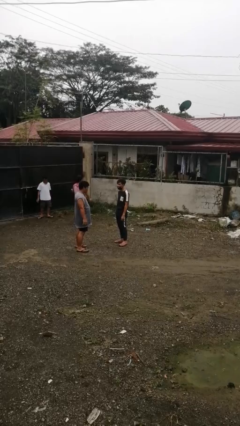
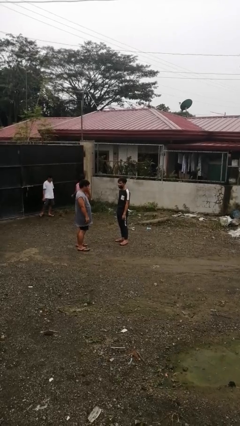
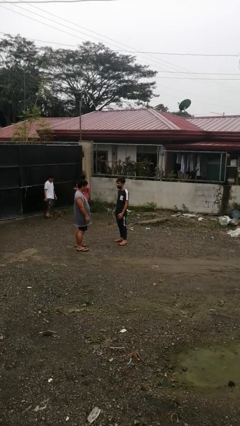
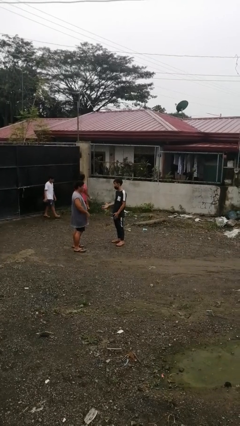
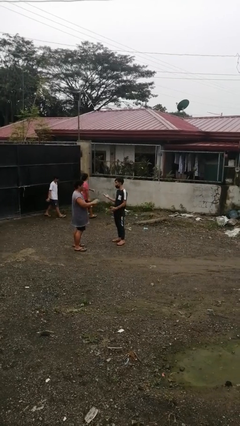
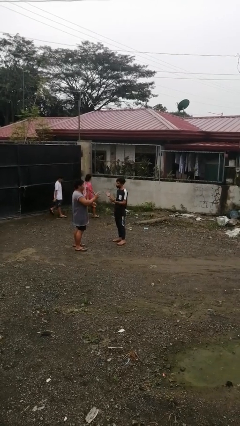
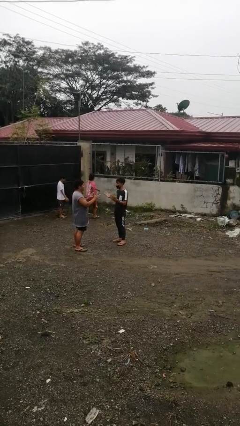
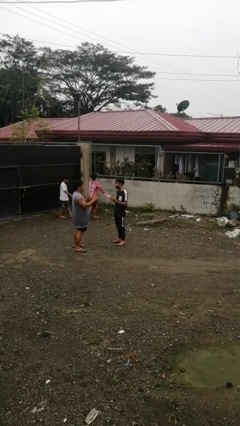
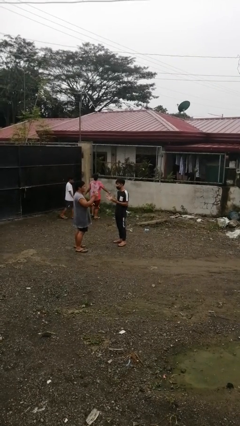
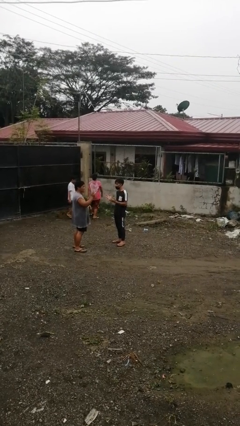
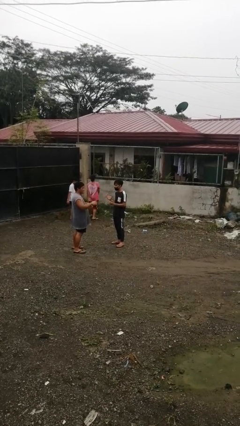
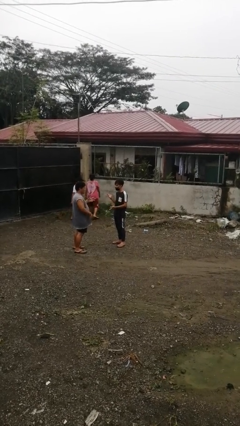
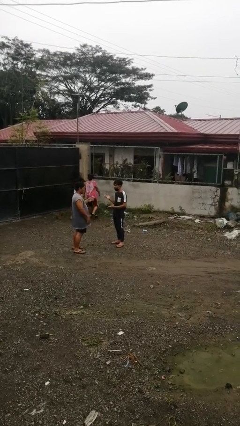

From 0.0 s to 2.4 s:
person talks to person

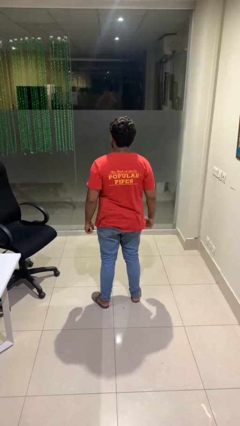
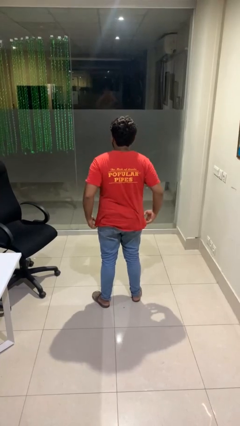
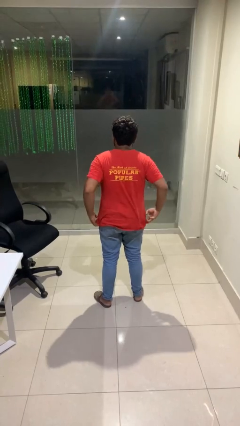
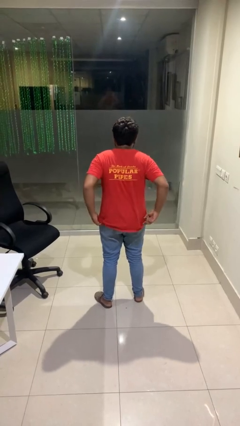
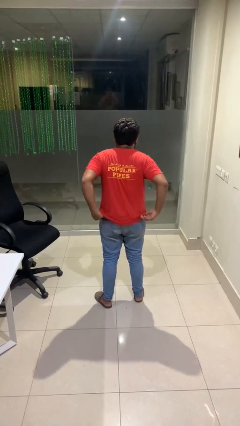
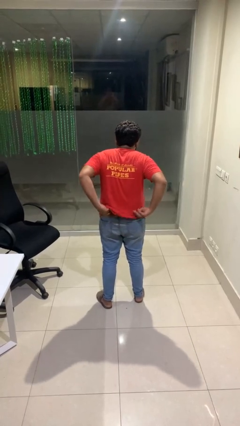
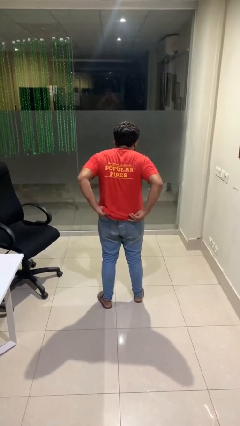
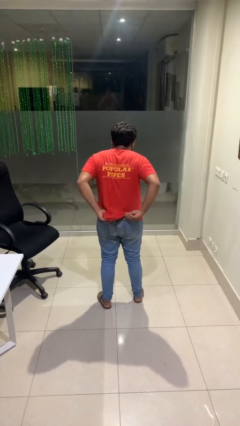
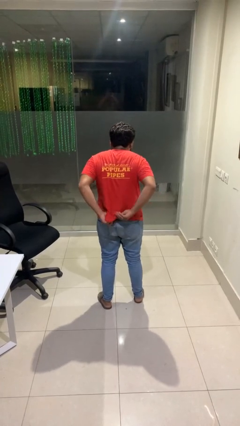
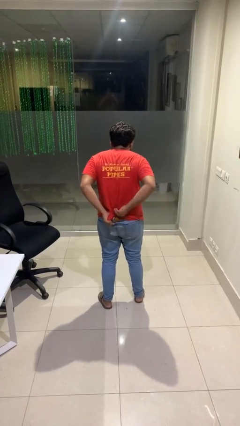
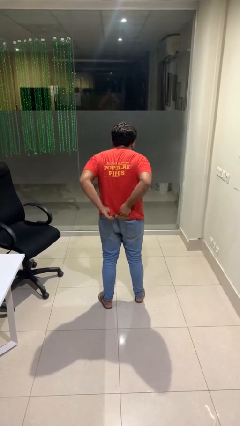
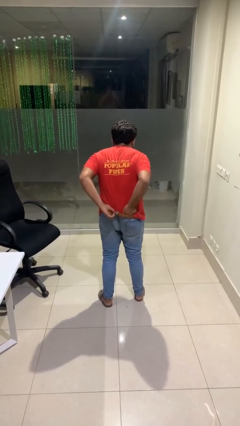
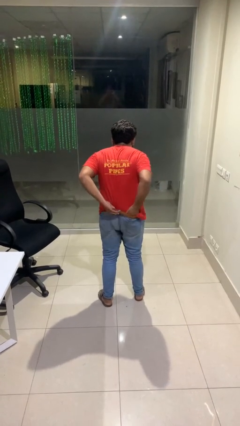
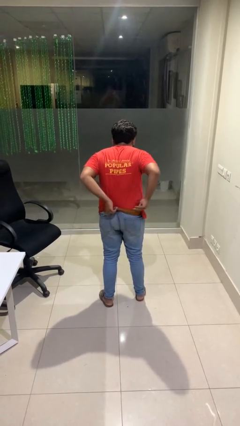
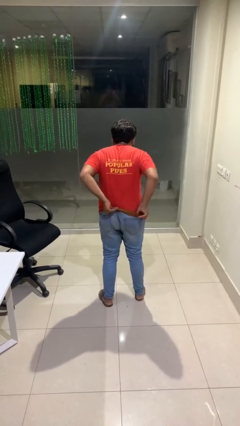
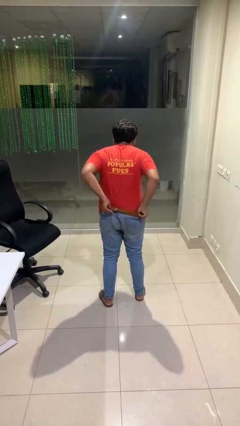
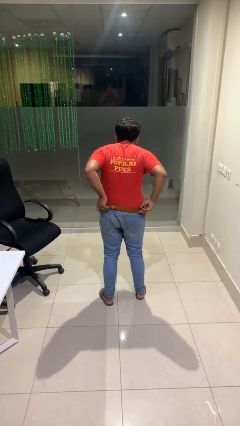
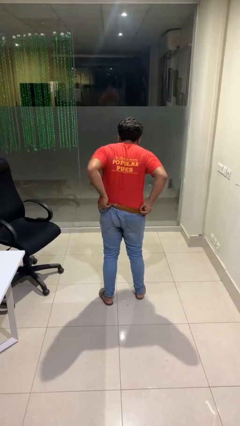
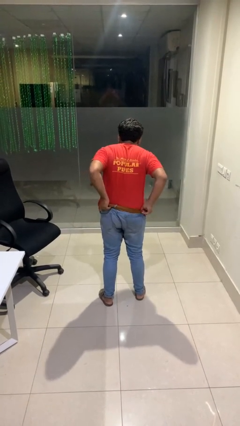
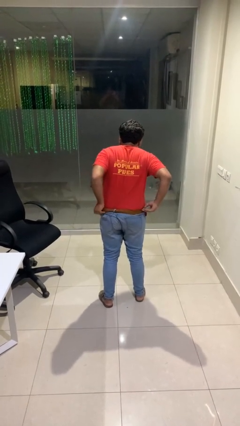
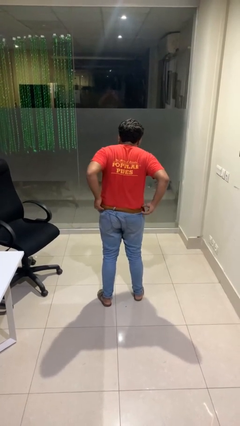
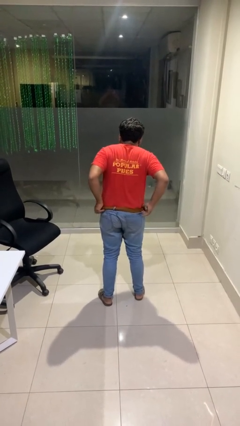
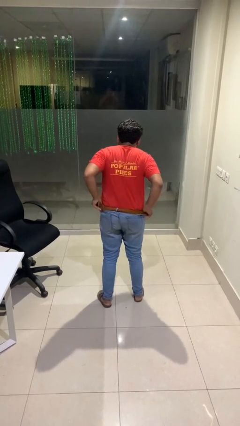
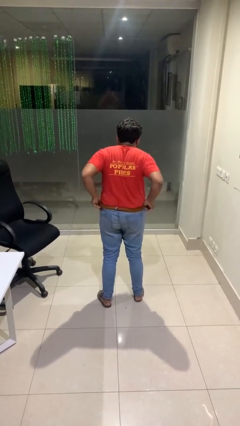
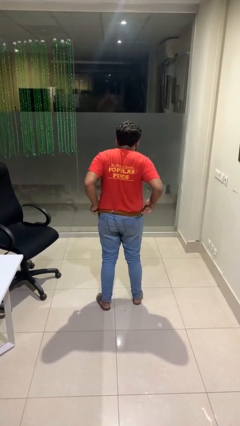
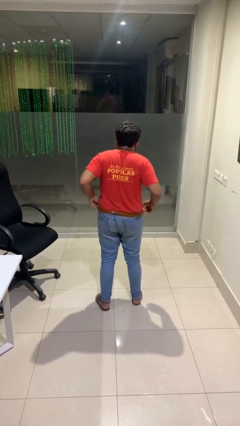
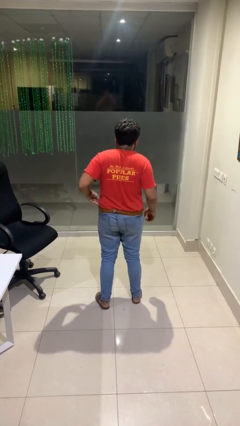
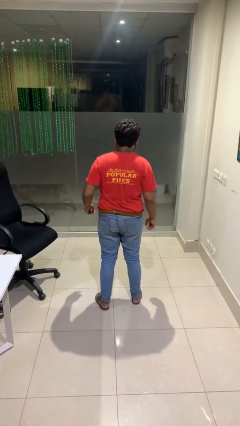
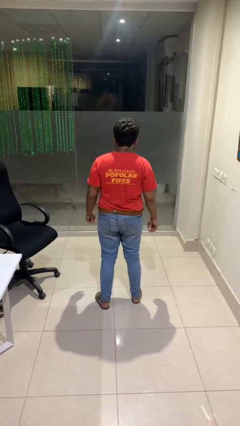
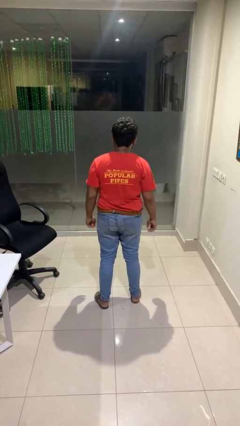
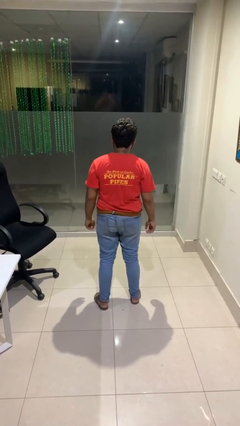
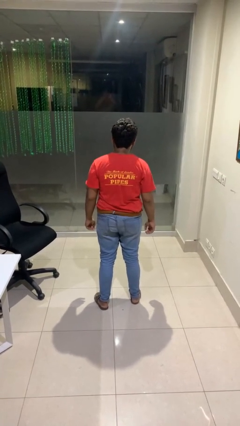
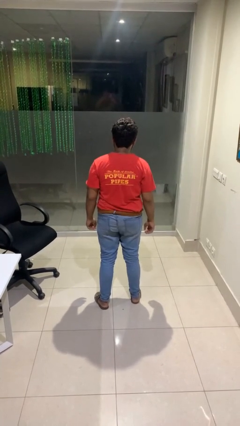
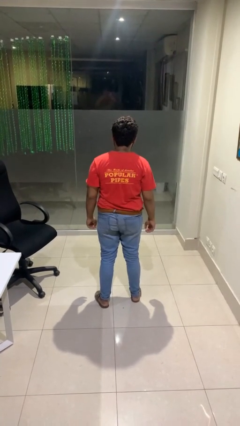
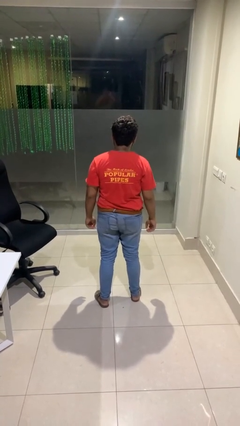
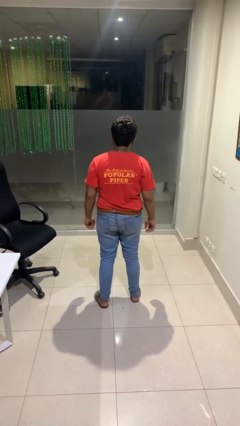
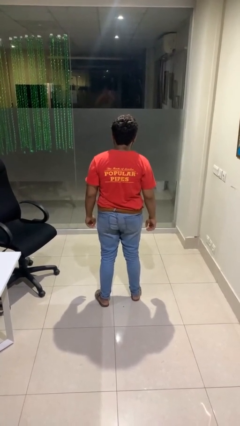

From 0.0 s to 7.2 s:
person tucks in shirt

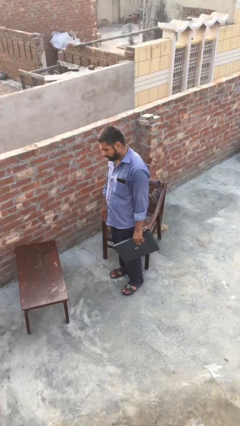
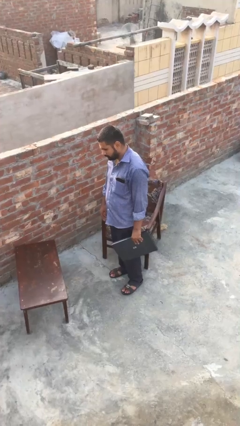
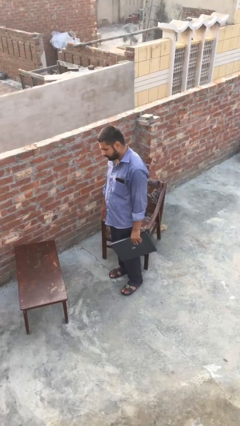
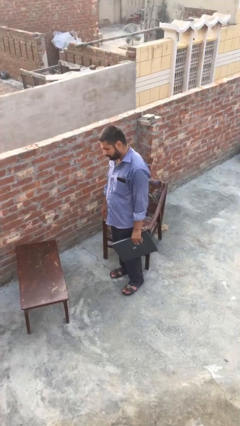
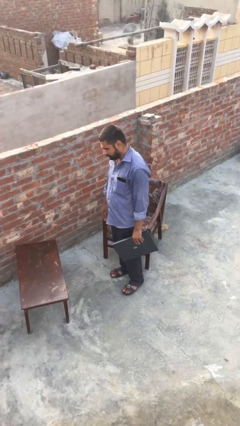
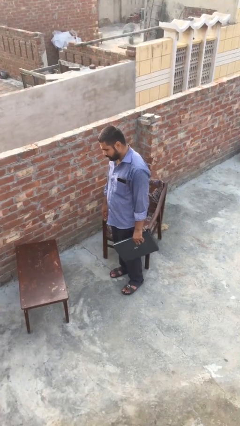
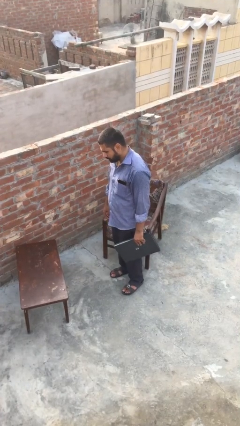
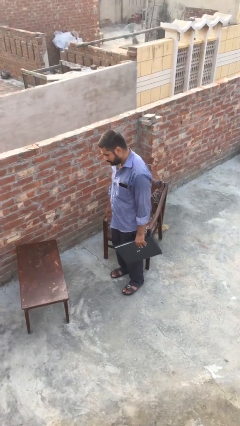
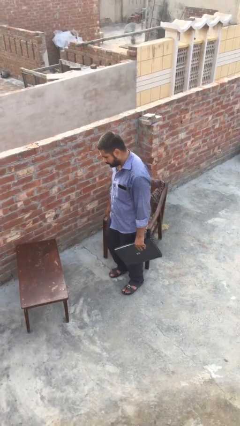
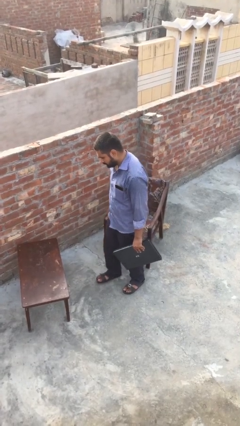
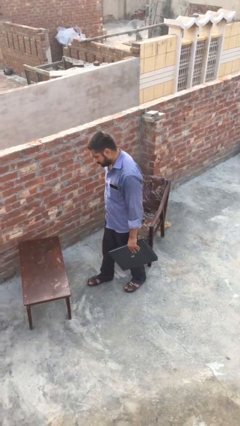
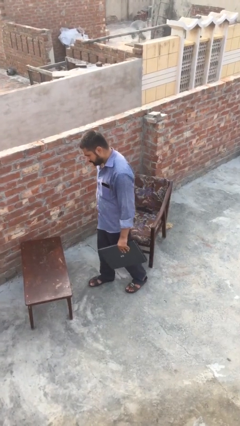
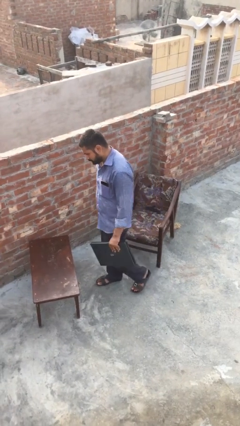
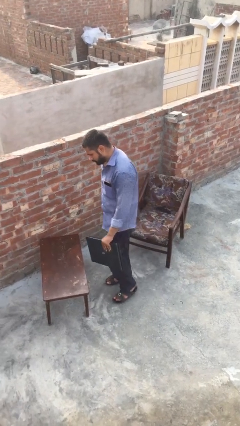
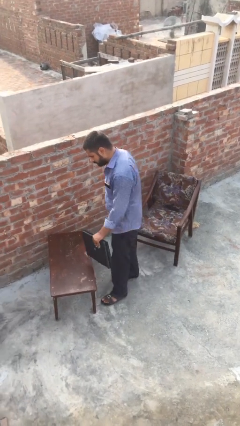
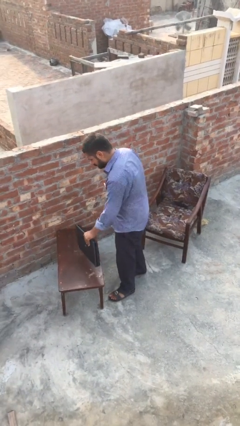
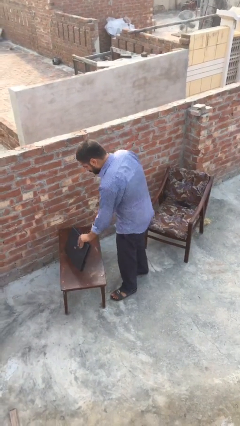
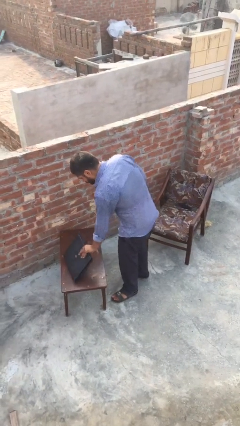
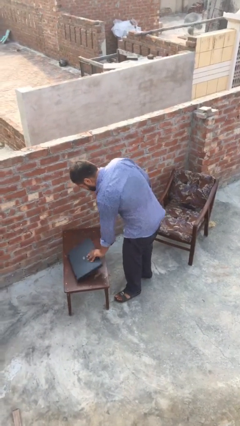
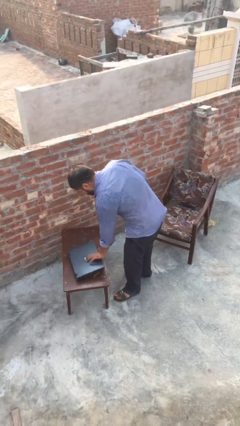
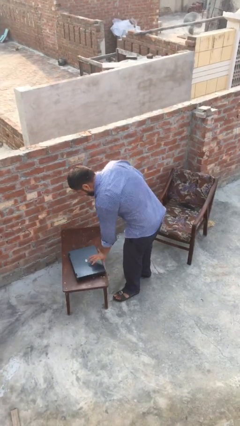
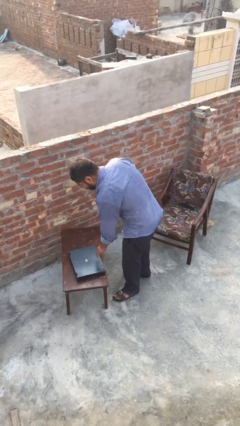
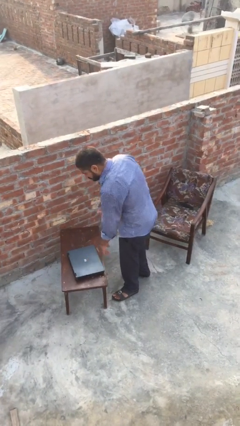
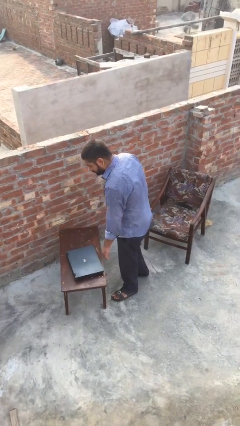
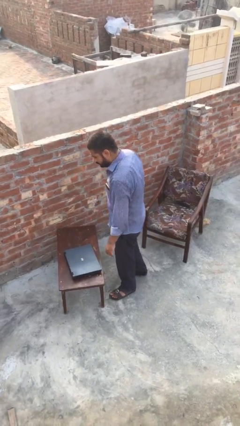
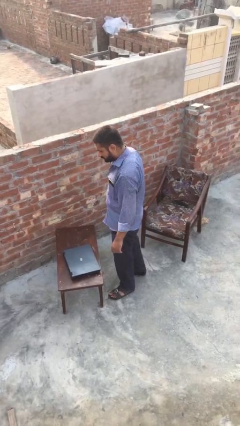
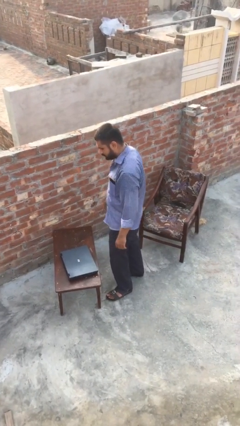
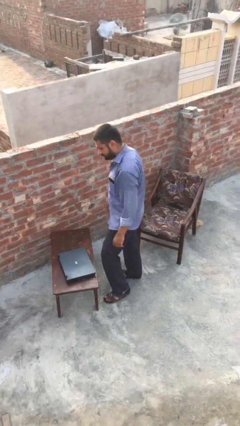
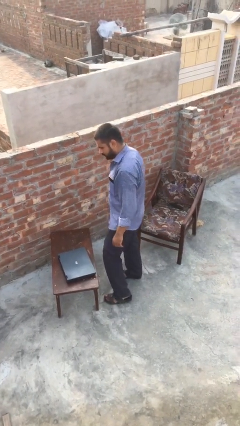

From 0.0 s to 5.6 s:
person puts down object on table

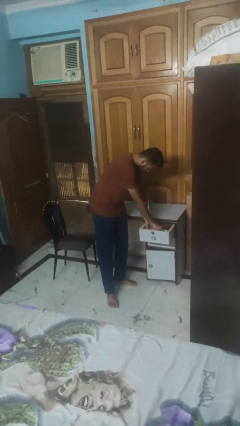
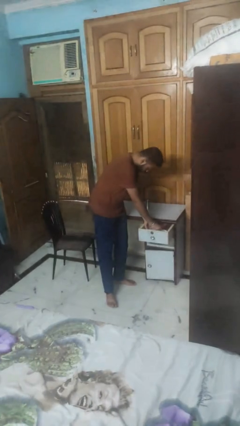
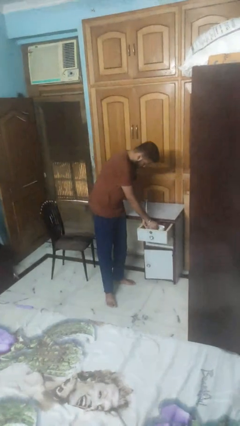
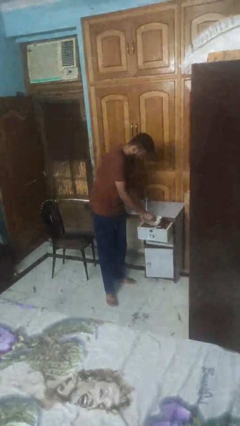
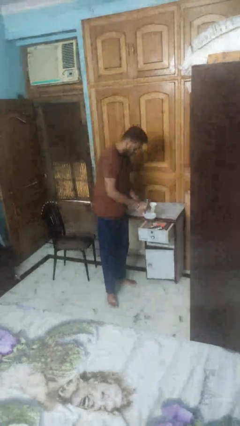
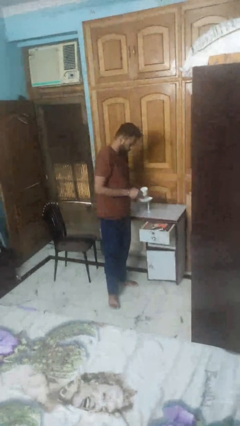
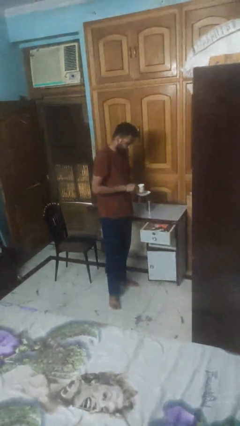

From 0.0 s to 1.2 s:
person takes object from kitchen drawer

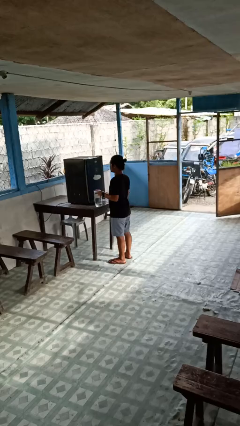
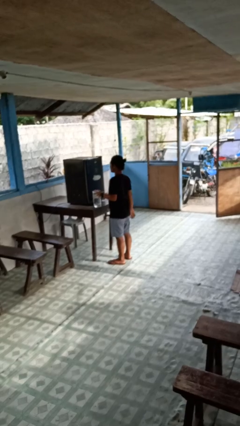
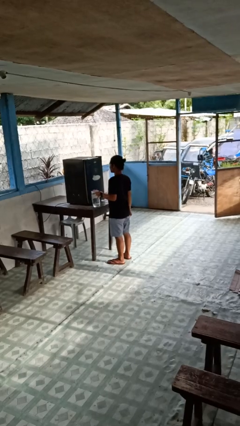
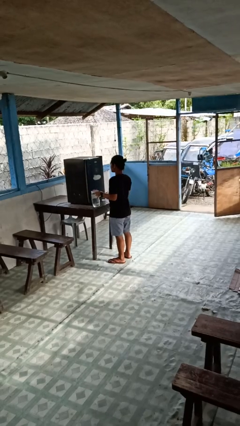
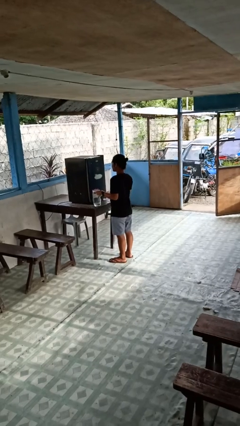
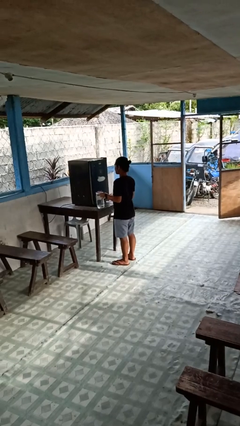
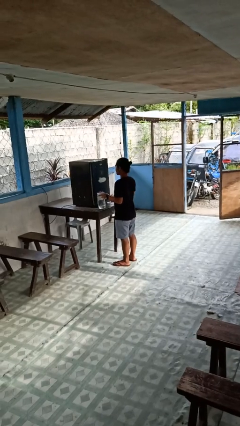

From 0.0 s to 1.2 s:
person closes refrigerator
